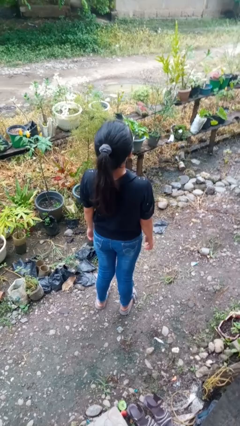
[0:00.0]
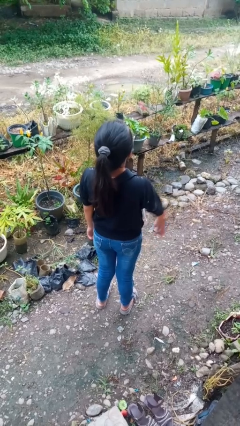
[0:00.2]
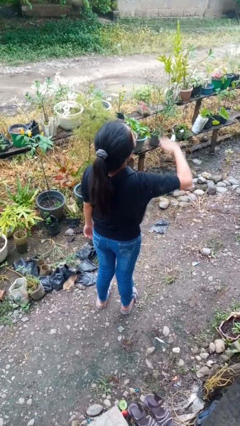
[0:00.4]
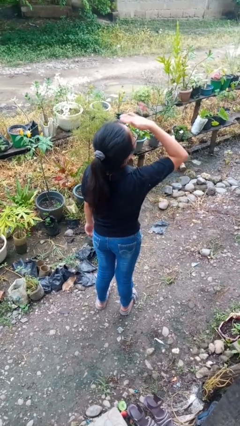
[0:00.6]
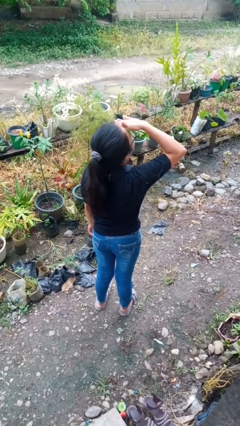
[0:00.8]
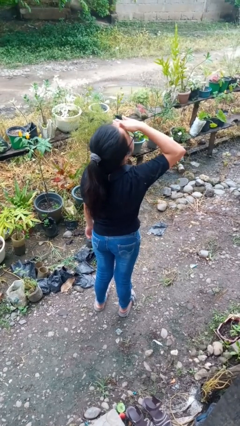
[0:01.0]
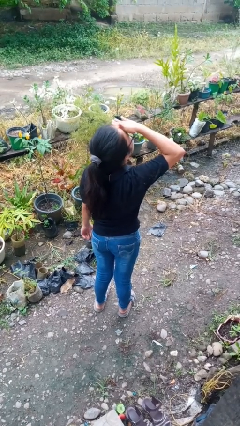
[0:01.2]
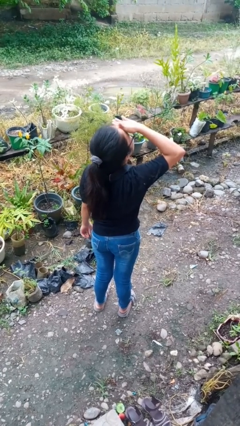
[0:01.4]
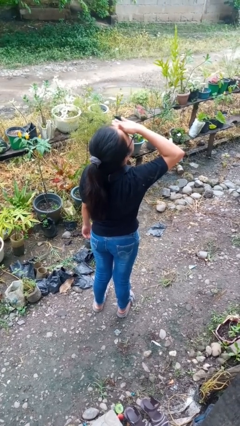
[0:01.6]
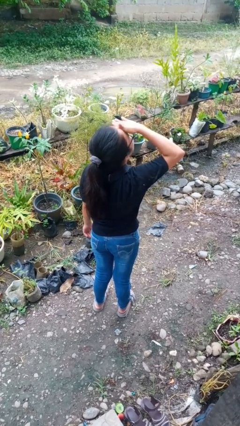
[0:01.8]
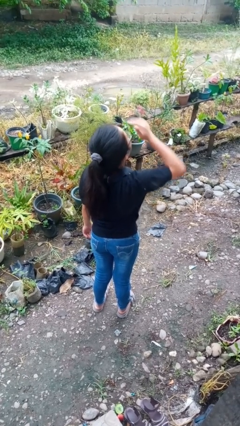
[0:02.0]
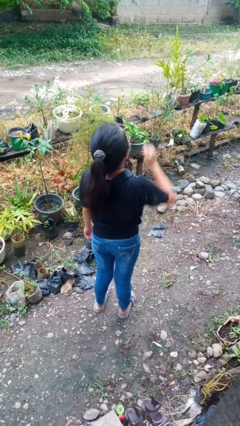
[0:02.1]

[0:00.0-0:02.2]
person shades eyes

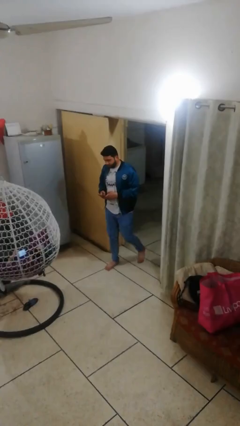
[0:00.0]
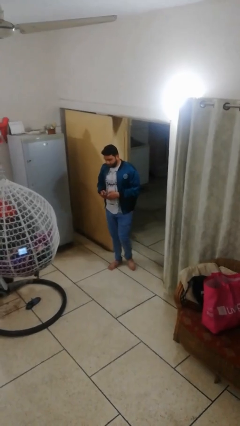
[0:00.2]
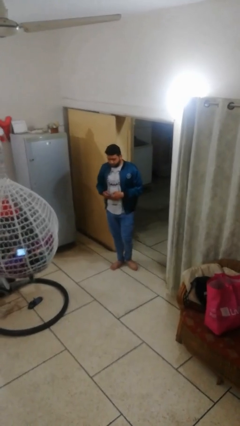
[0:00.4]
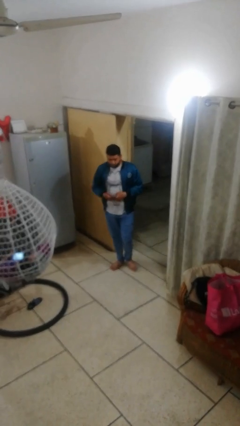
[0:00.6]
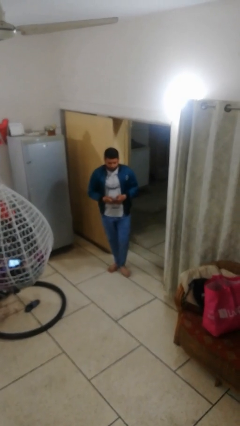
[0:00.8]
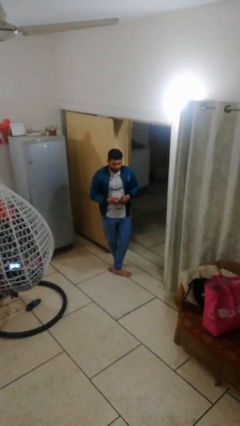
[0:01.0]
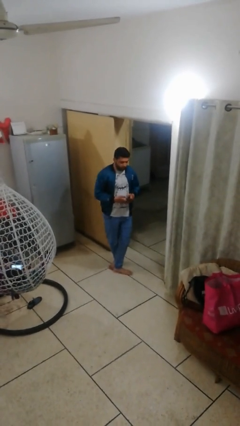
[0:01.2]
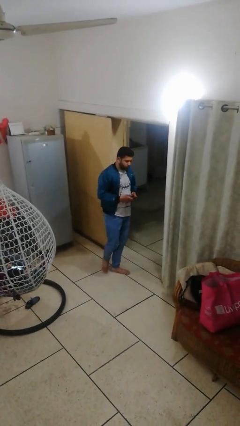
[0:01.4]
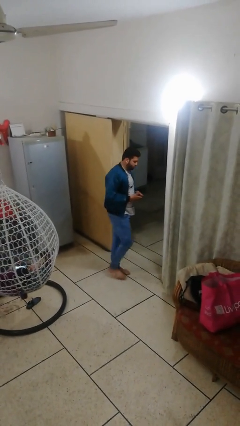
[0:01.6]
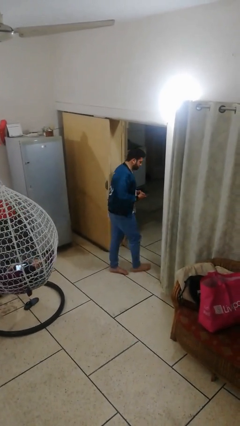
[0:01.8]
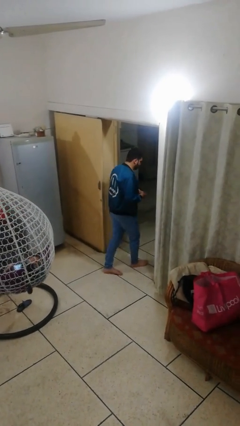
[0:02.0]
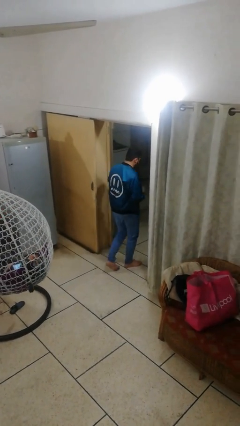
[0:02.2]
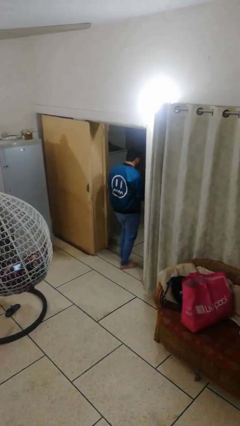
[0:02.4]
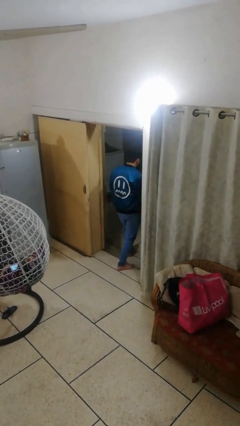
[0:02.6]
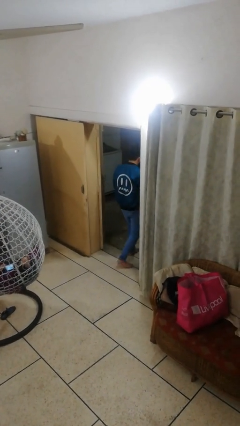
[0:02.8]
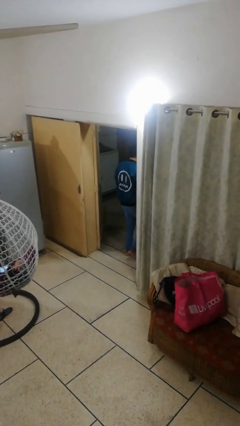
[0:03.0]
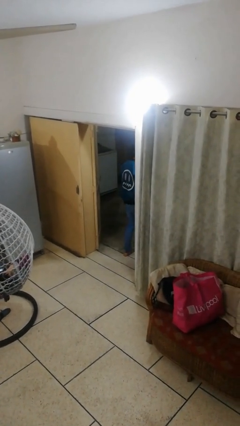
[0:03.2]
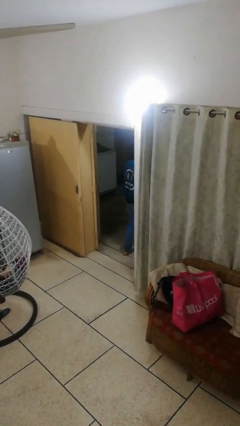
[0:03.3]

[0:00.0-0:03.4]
person exits scene through structure

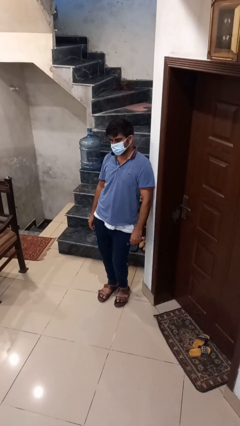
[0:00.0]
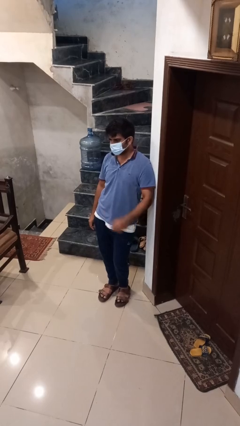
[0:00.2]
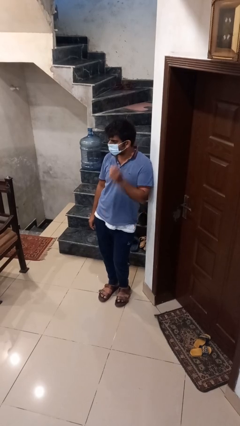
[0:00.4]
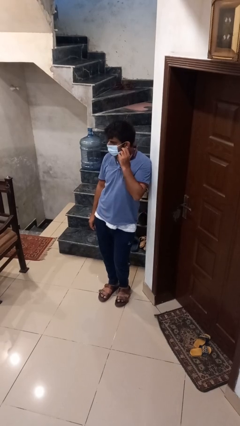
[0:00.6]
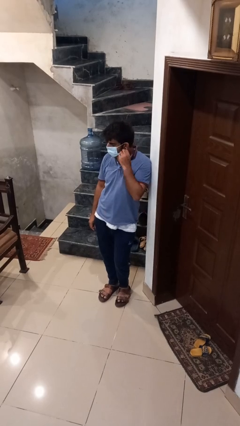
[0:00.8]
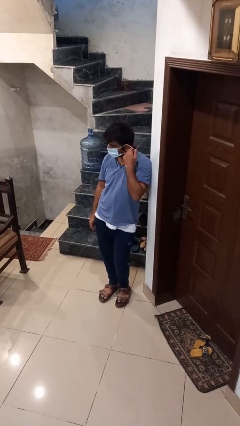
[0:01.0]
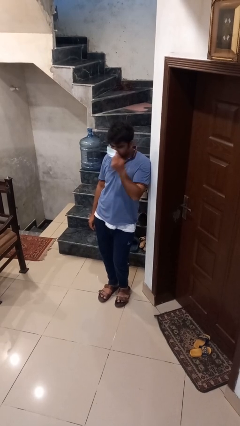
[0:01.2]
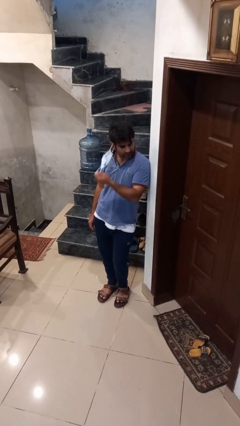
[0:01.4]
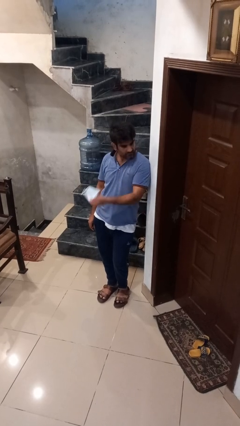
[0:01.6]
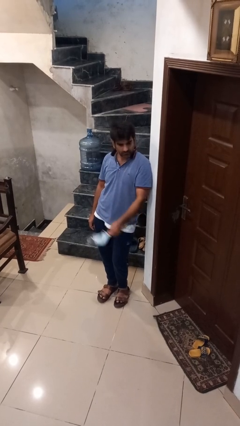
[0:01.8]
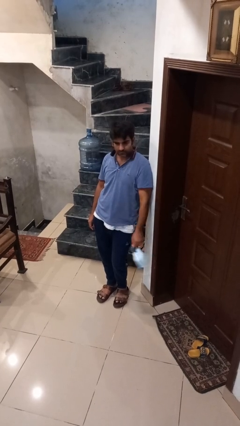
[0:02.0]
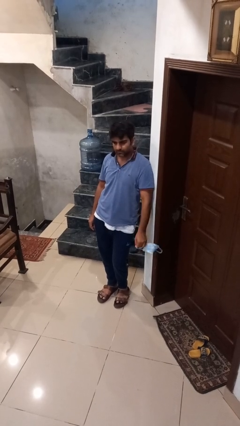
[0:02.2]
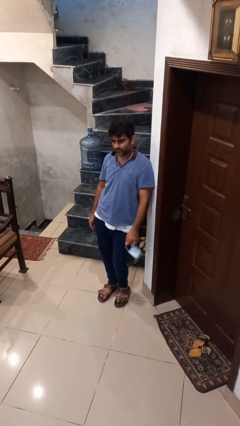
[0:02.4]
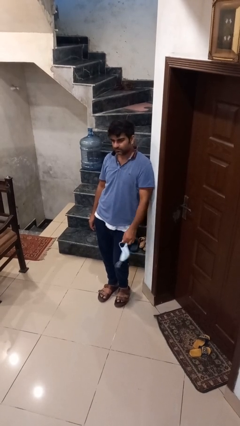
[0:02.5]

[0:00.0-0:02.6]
person takes off facemask

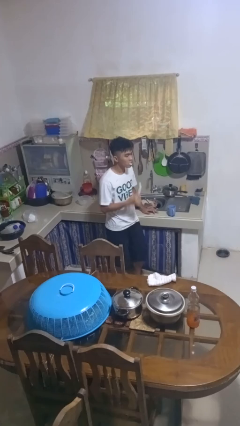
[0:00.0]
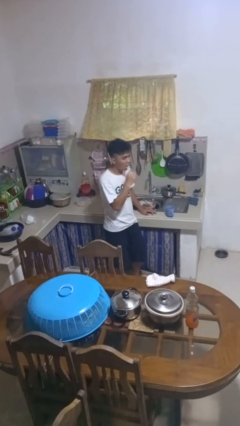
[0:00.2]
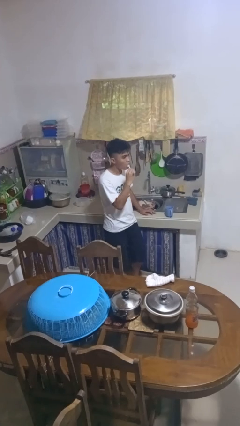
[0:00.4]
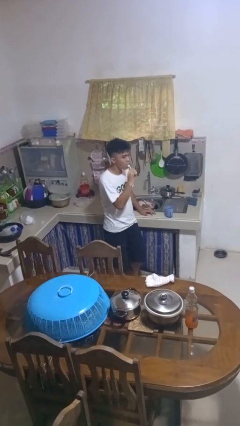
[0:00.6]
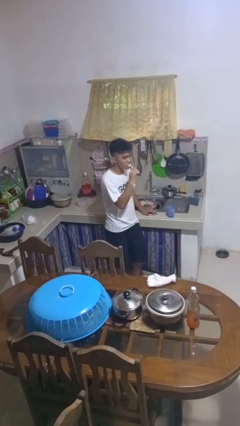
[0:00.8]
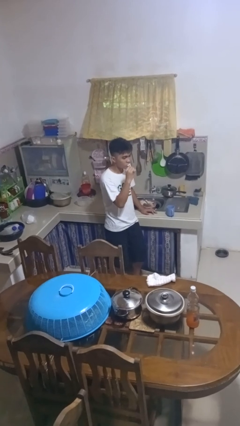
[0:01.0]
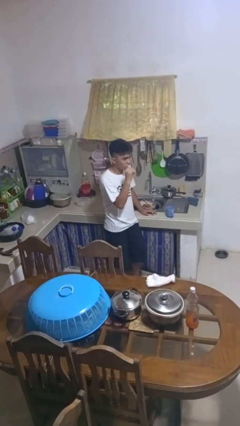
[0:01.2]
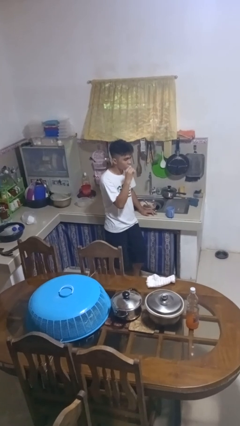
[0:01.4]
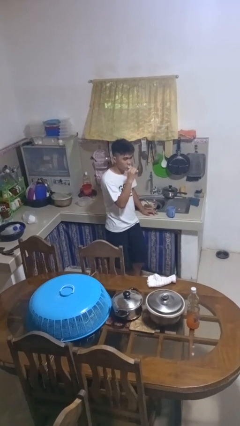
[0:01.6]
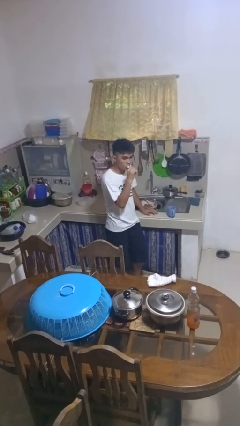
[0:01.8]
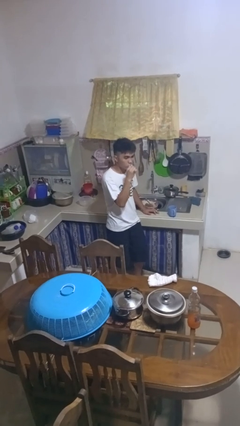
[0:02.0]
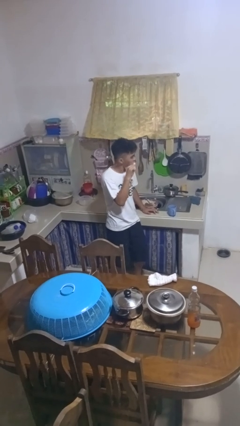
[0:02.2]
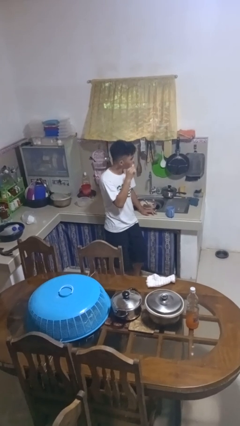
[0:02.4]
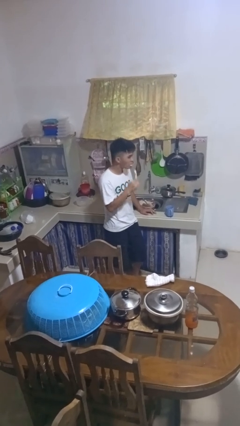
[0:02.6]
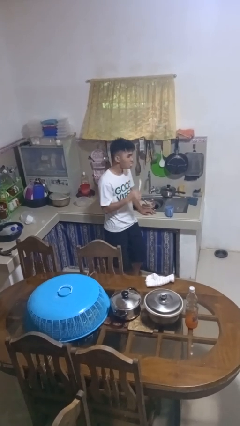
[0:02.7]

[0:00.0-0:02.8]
person brushes teeth

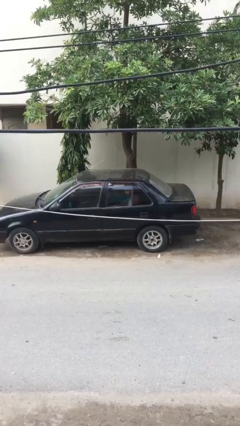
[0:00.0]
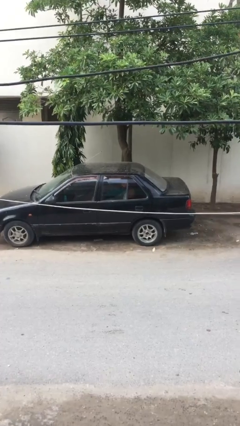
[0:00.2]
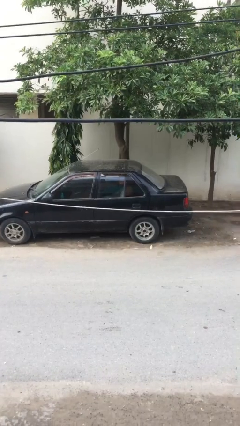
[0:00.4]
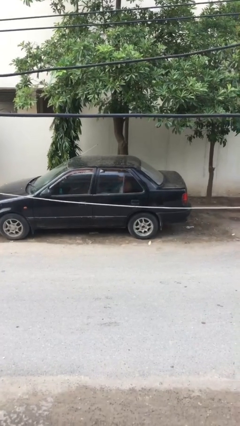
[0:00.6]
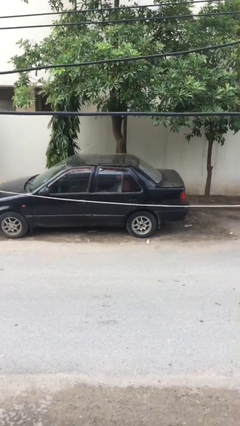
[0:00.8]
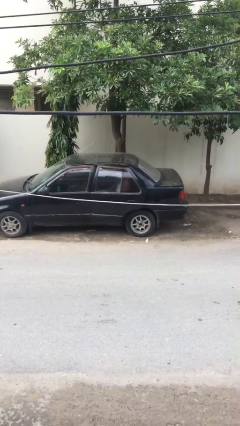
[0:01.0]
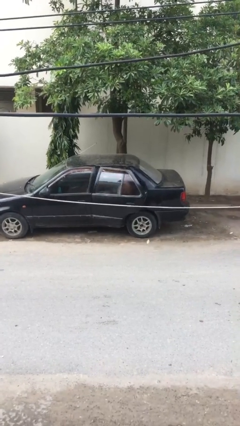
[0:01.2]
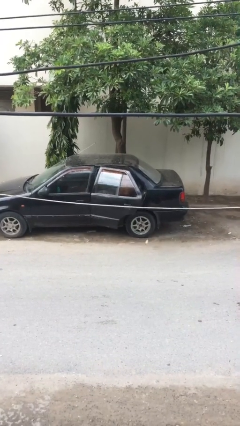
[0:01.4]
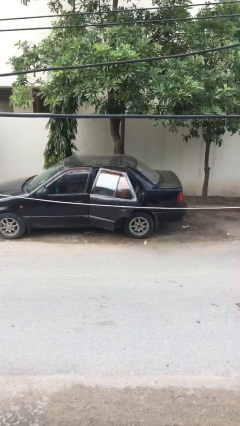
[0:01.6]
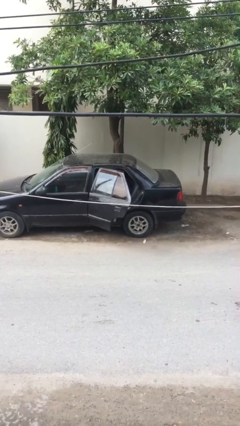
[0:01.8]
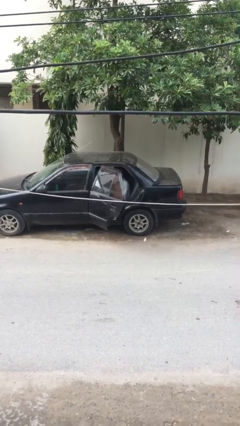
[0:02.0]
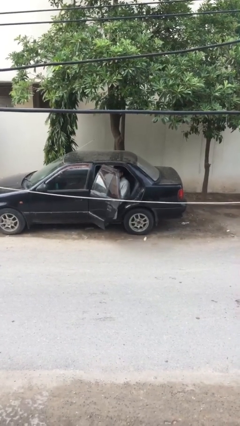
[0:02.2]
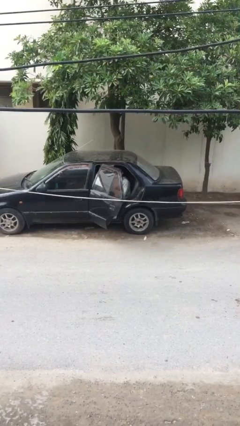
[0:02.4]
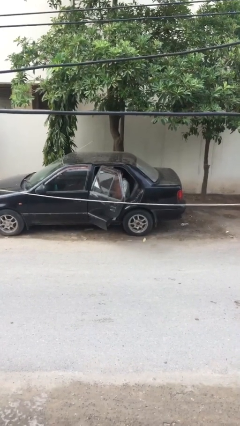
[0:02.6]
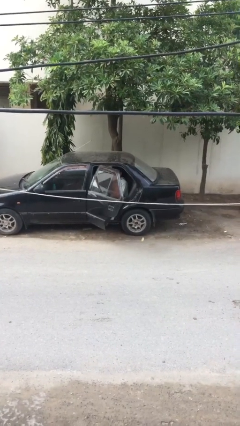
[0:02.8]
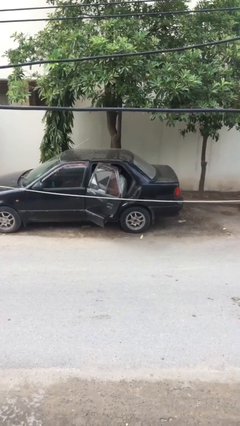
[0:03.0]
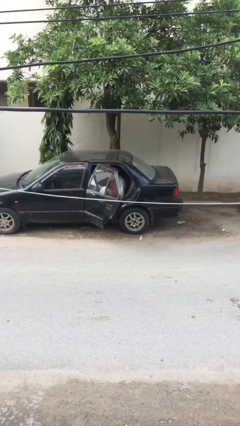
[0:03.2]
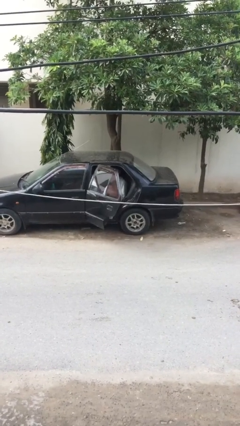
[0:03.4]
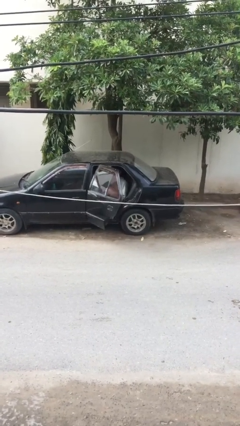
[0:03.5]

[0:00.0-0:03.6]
person opens car door

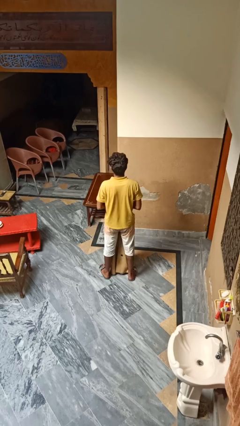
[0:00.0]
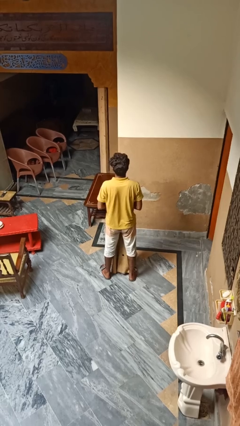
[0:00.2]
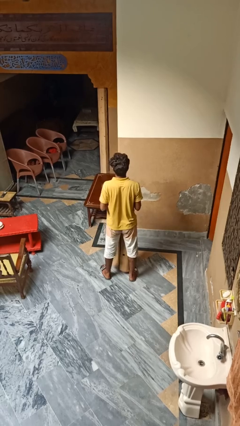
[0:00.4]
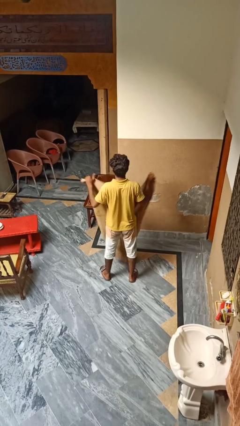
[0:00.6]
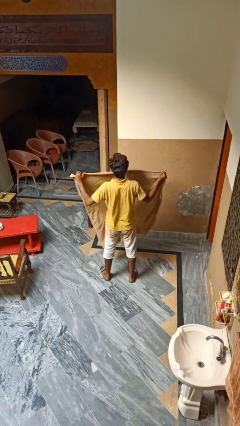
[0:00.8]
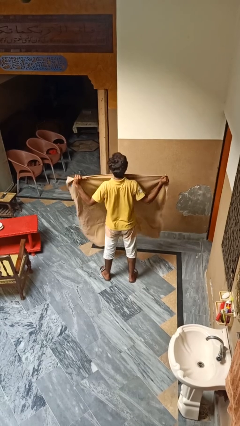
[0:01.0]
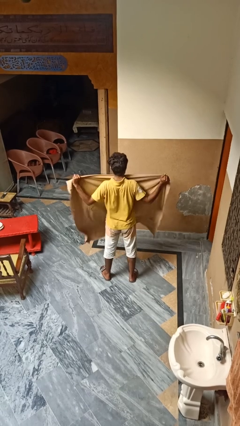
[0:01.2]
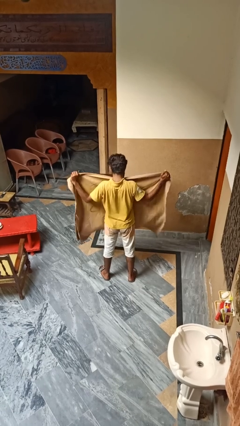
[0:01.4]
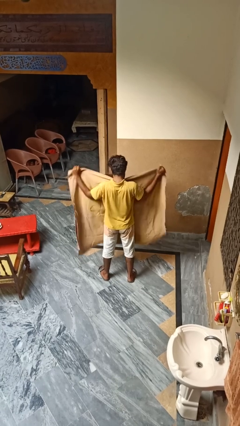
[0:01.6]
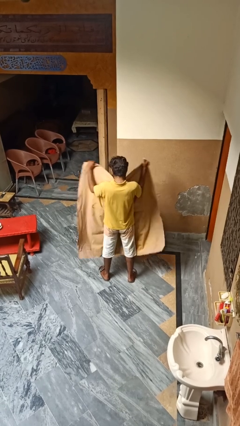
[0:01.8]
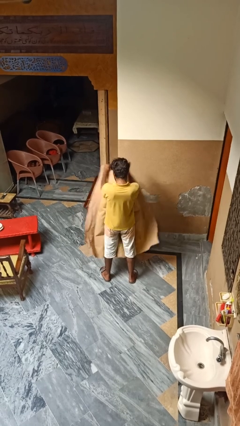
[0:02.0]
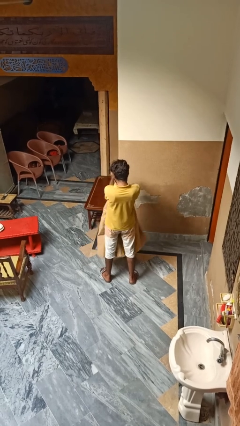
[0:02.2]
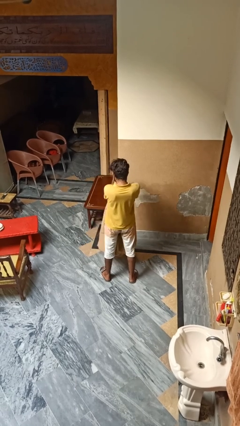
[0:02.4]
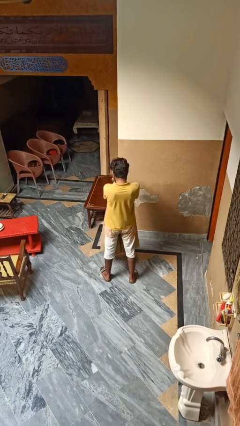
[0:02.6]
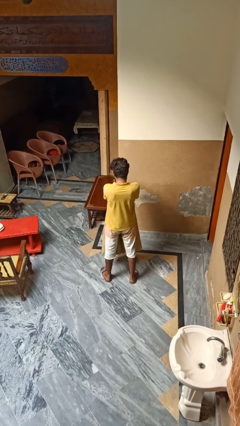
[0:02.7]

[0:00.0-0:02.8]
person folds blanket
